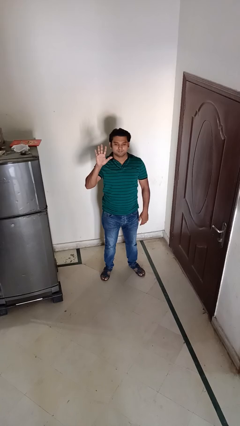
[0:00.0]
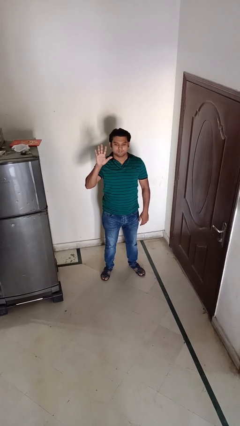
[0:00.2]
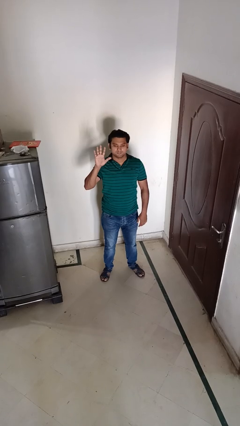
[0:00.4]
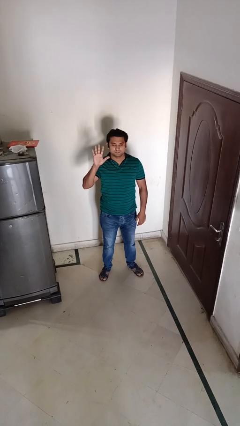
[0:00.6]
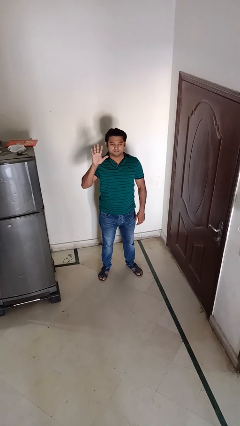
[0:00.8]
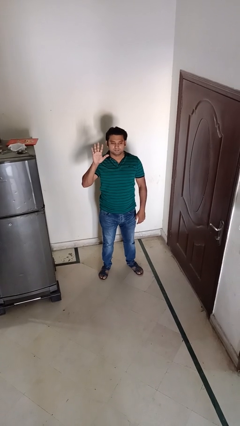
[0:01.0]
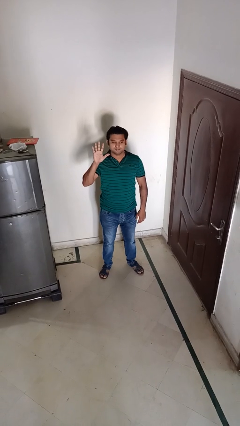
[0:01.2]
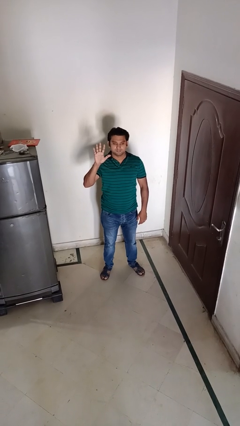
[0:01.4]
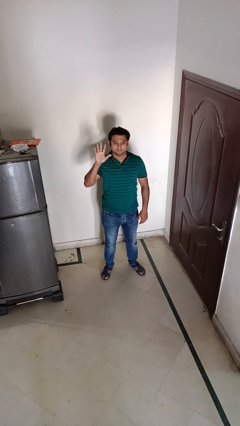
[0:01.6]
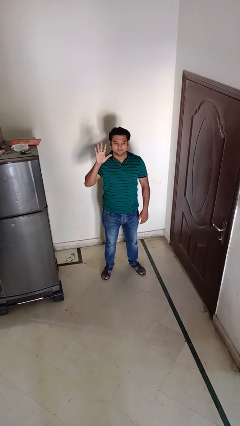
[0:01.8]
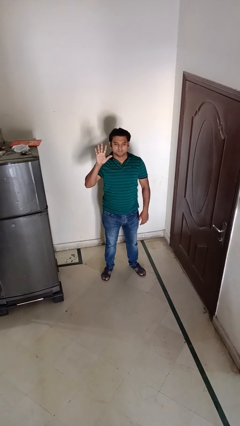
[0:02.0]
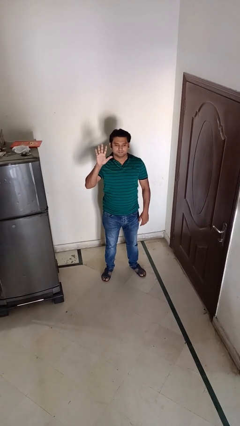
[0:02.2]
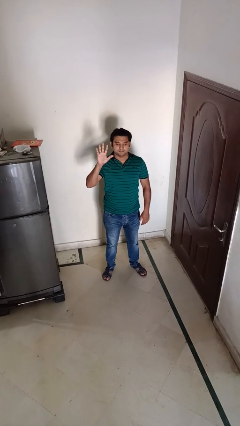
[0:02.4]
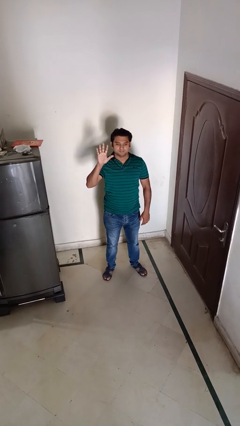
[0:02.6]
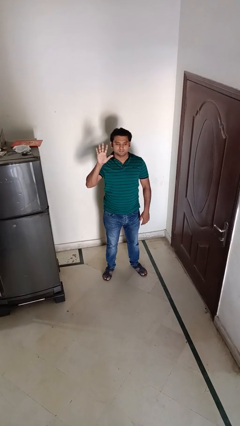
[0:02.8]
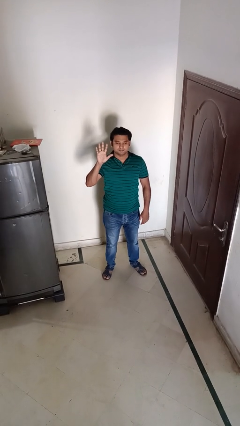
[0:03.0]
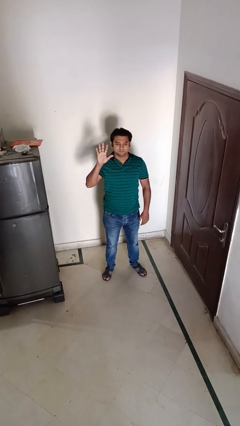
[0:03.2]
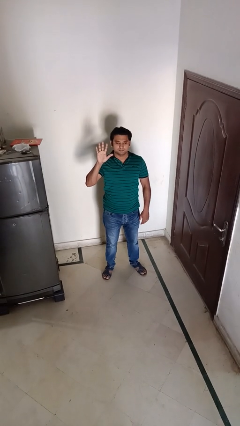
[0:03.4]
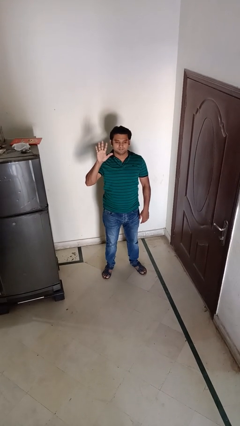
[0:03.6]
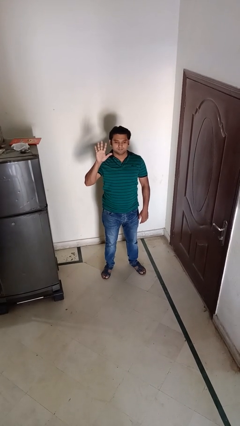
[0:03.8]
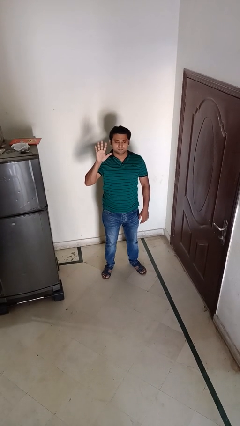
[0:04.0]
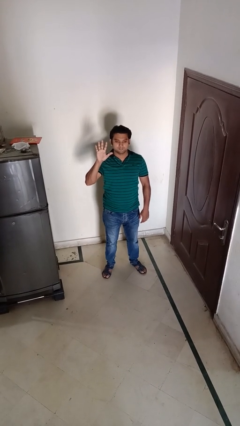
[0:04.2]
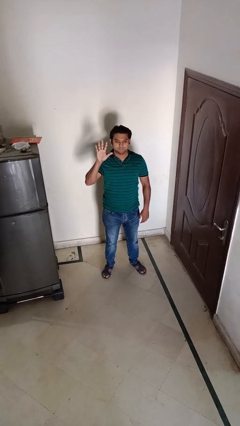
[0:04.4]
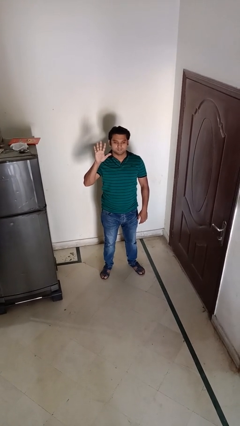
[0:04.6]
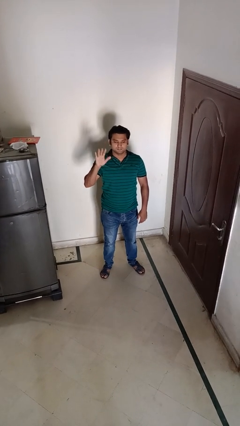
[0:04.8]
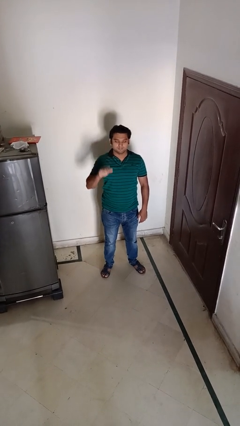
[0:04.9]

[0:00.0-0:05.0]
person gestures number five

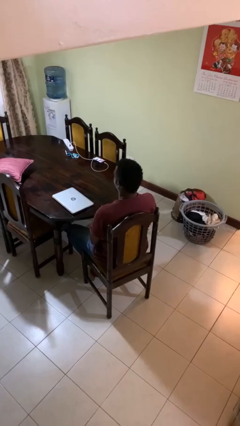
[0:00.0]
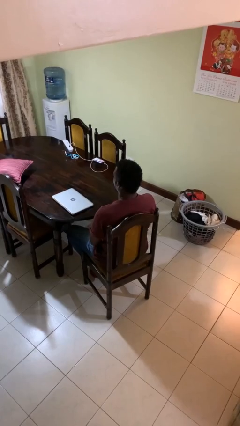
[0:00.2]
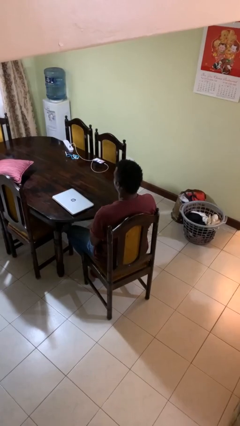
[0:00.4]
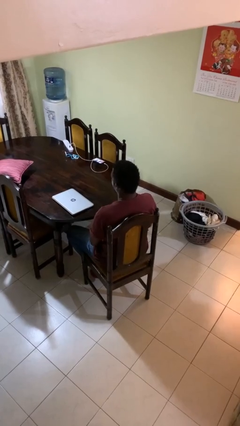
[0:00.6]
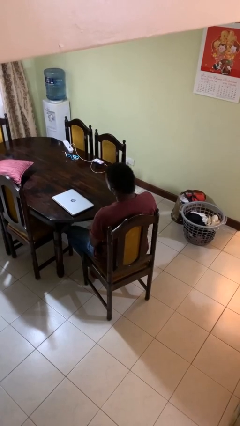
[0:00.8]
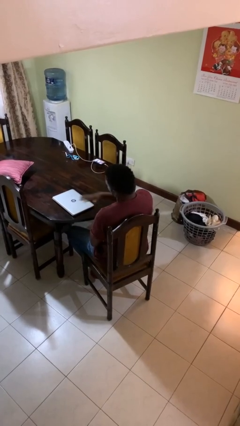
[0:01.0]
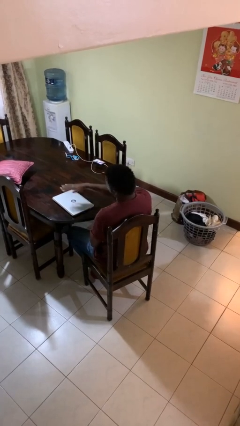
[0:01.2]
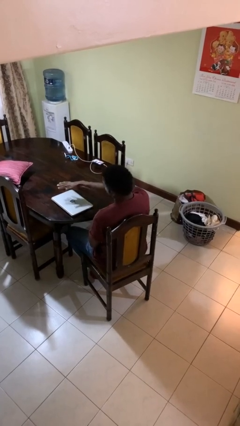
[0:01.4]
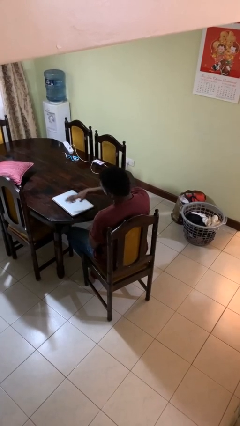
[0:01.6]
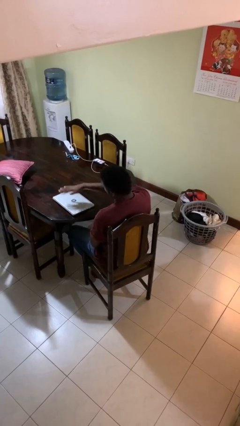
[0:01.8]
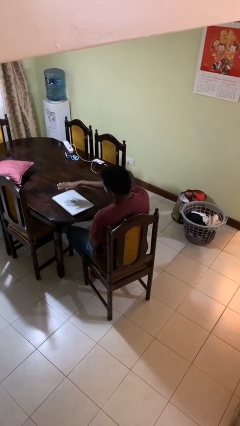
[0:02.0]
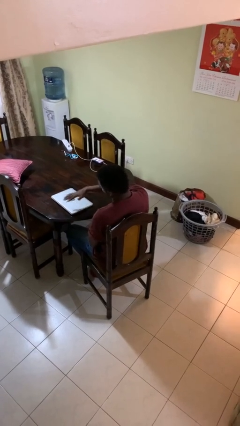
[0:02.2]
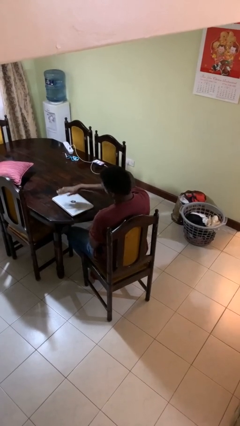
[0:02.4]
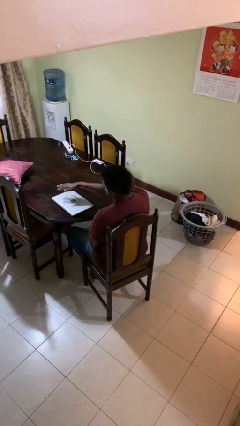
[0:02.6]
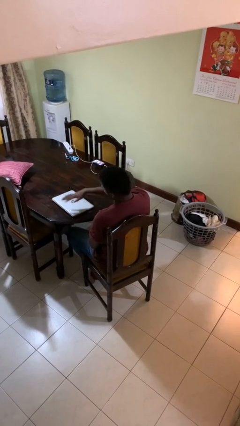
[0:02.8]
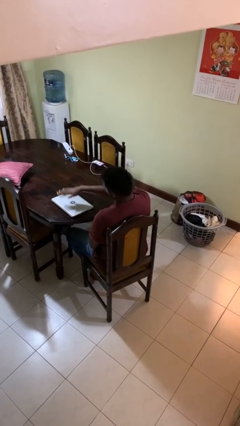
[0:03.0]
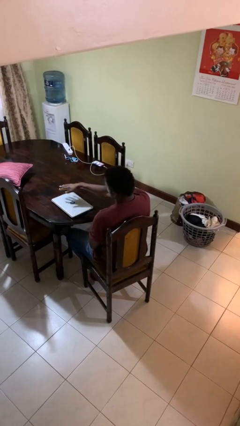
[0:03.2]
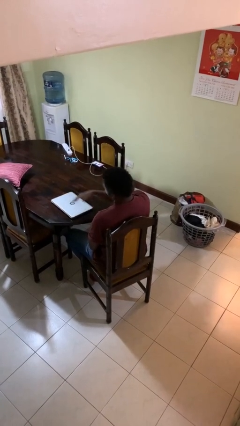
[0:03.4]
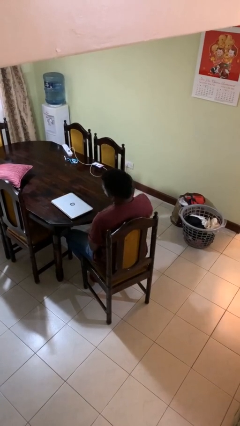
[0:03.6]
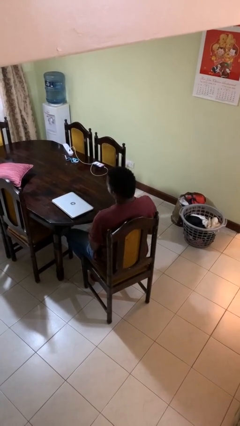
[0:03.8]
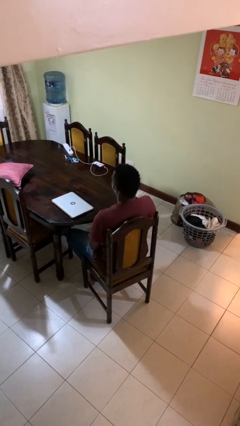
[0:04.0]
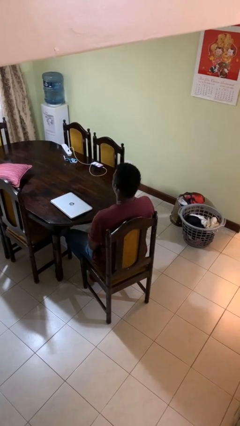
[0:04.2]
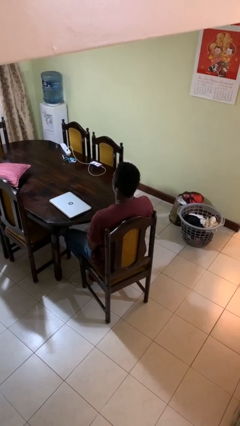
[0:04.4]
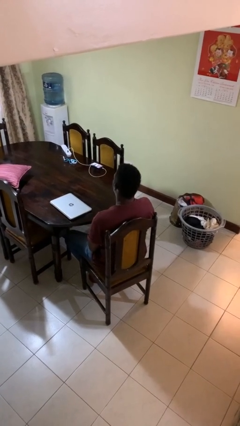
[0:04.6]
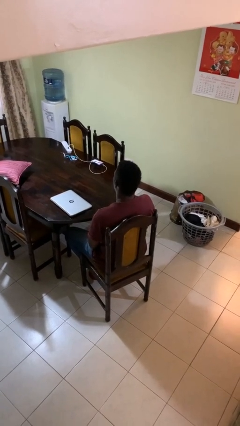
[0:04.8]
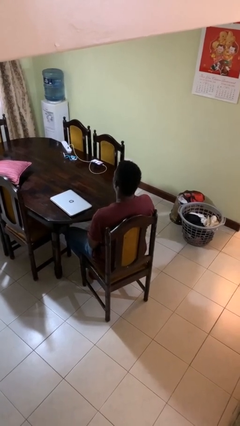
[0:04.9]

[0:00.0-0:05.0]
person waves hand over object

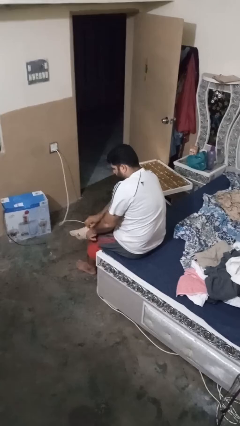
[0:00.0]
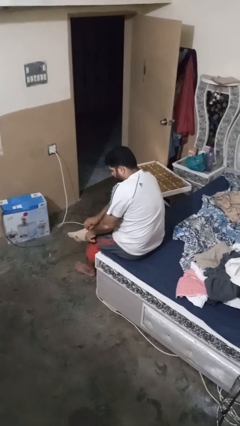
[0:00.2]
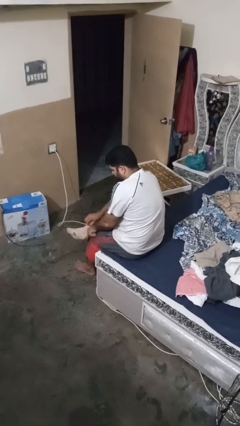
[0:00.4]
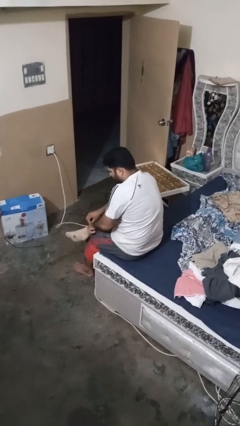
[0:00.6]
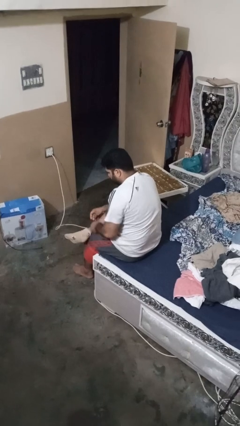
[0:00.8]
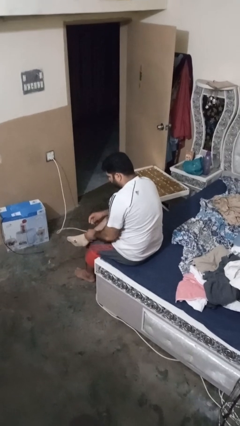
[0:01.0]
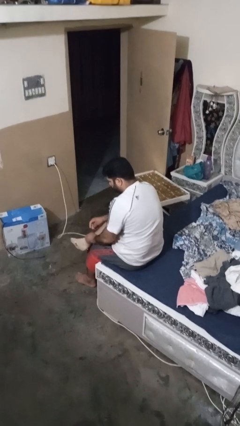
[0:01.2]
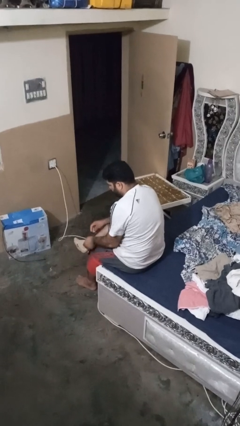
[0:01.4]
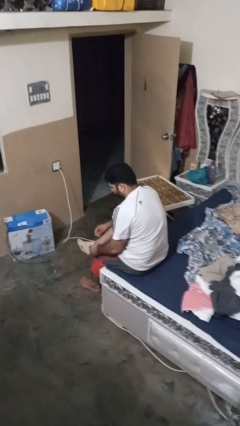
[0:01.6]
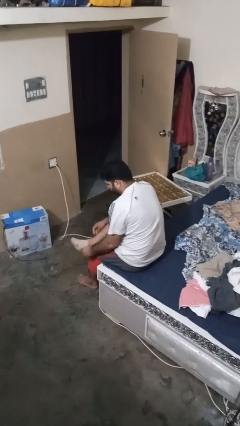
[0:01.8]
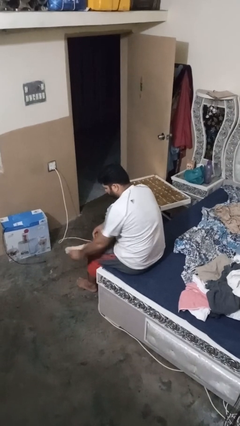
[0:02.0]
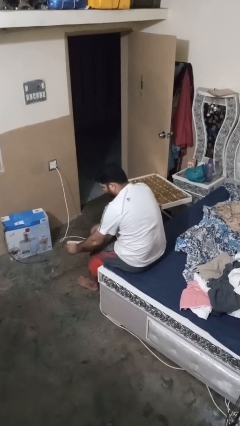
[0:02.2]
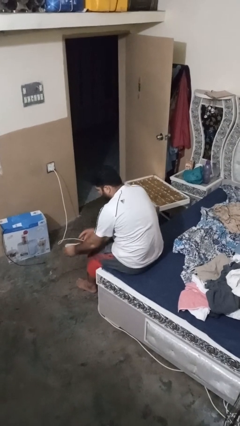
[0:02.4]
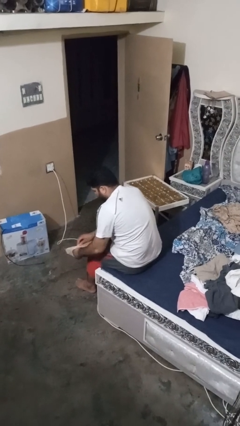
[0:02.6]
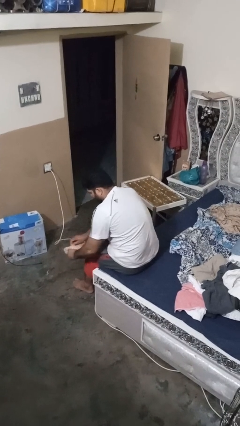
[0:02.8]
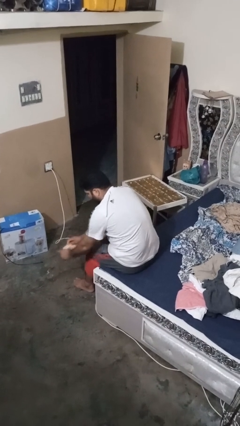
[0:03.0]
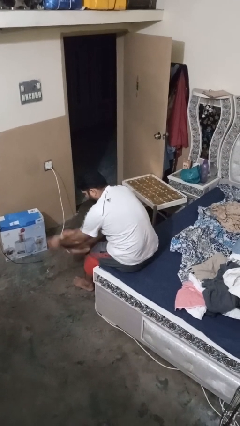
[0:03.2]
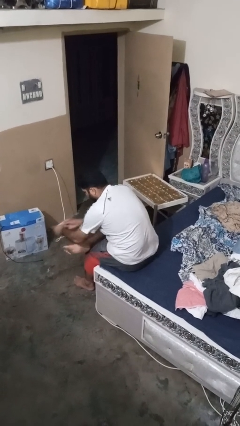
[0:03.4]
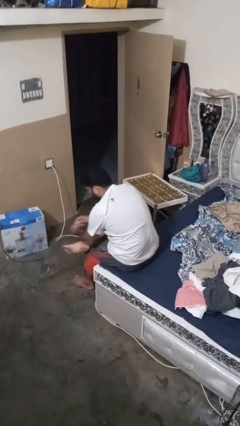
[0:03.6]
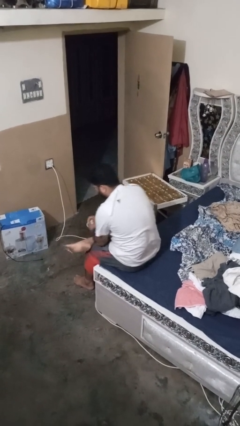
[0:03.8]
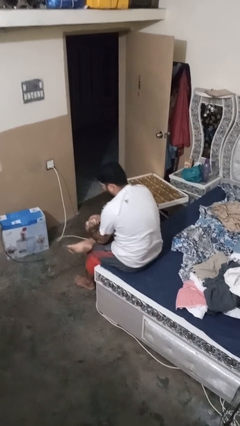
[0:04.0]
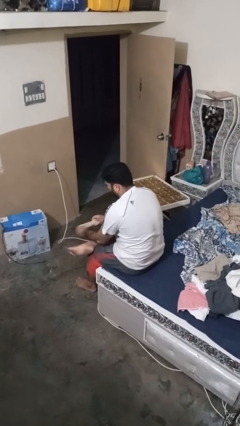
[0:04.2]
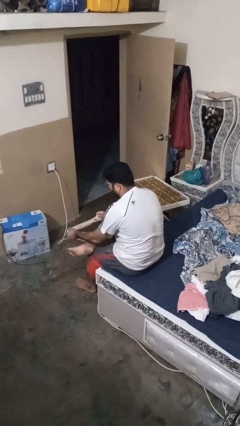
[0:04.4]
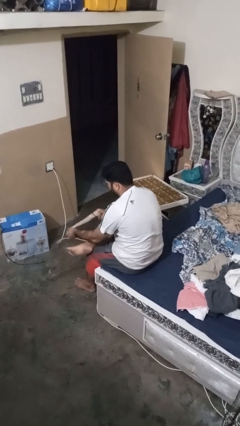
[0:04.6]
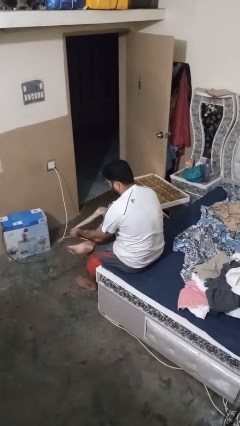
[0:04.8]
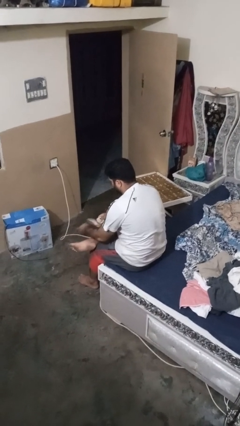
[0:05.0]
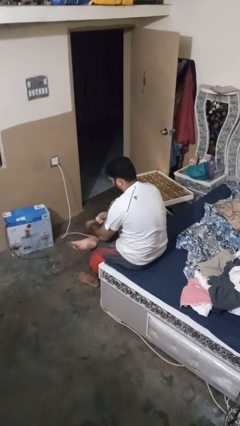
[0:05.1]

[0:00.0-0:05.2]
person takes off socks

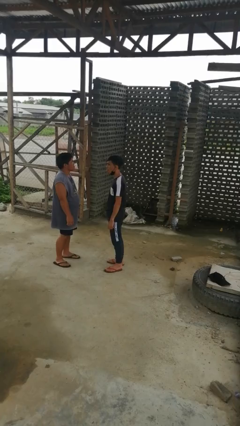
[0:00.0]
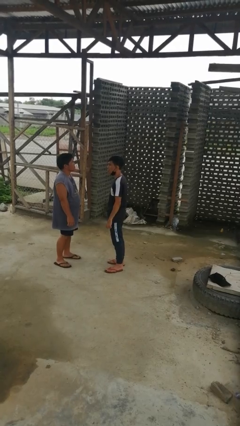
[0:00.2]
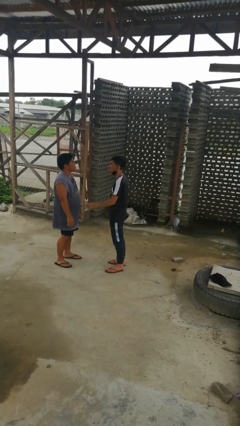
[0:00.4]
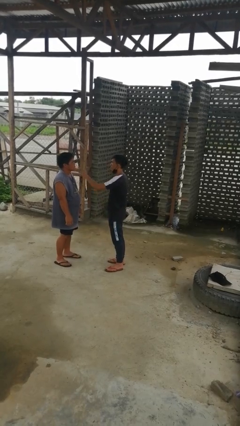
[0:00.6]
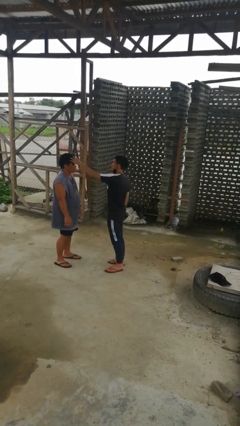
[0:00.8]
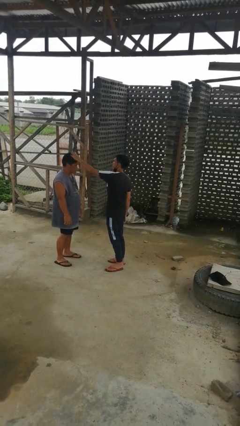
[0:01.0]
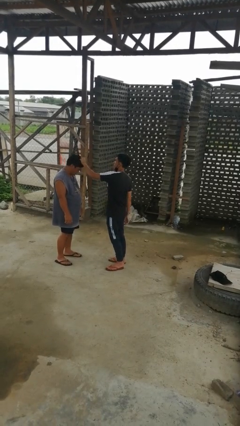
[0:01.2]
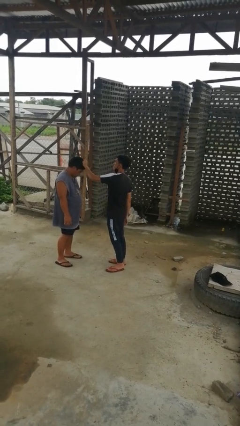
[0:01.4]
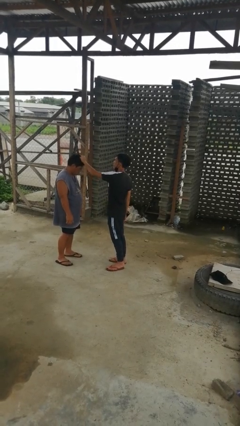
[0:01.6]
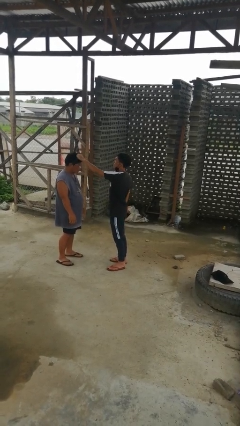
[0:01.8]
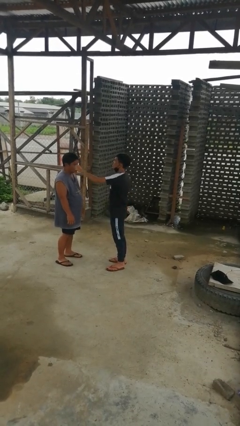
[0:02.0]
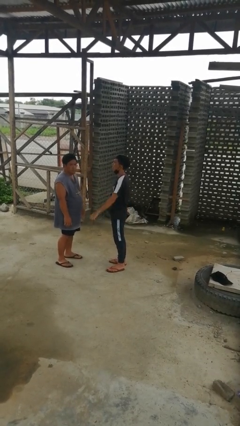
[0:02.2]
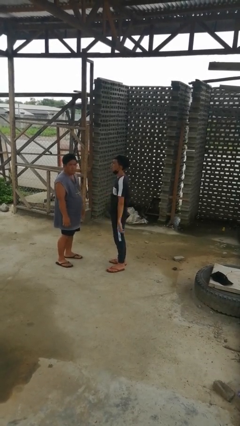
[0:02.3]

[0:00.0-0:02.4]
person grabs person by hair
